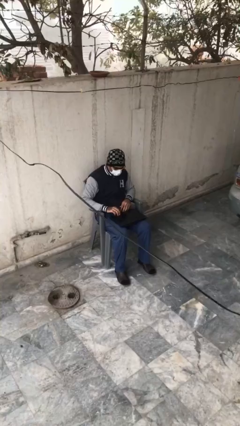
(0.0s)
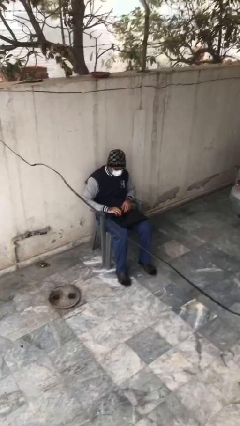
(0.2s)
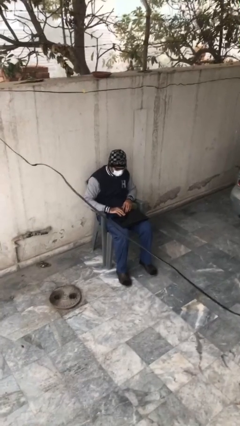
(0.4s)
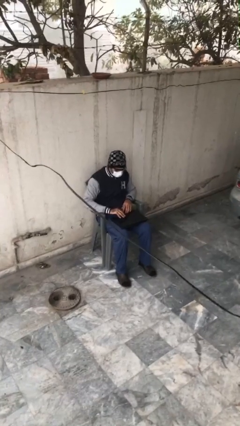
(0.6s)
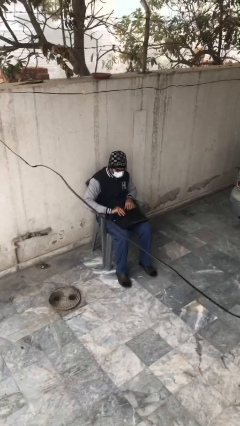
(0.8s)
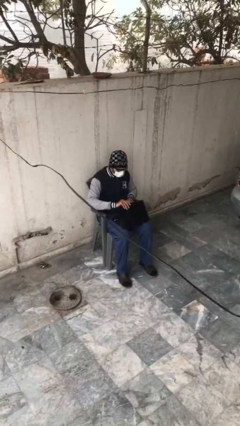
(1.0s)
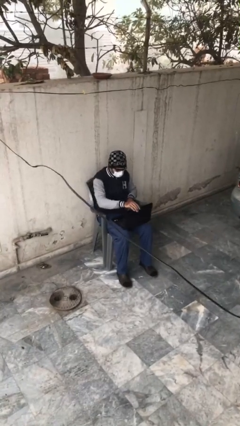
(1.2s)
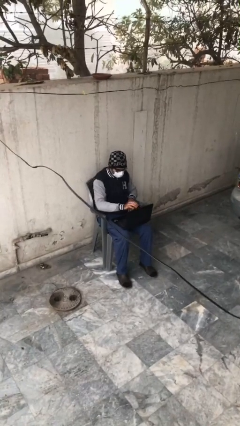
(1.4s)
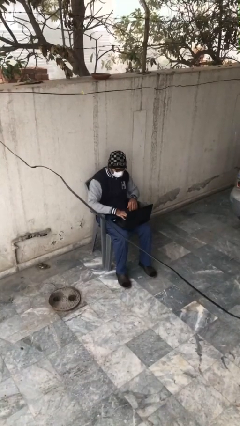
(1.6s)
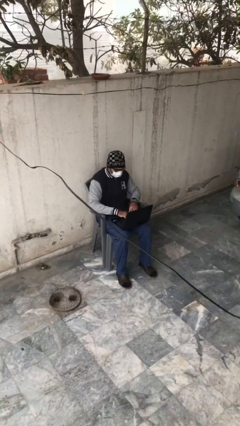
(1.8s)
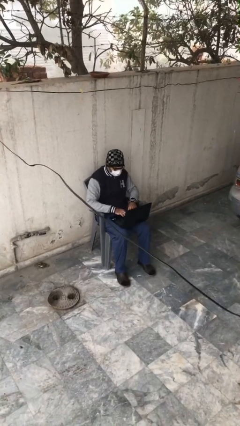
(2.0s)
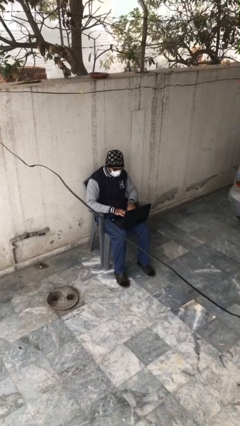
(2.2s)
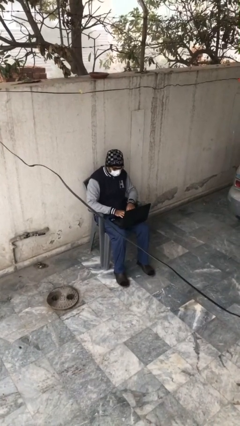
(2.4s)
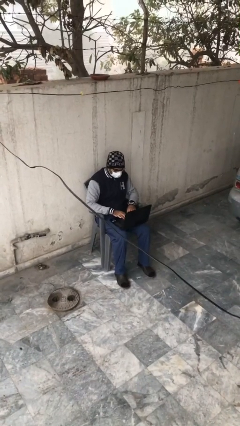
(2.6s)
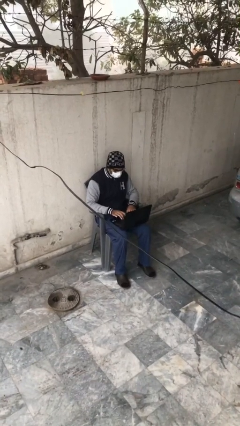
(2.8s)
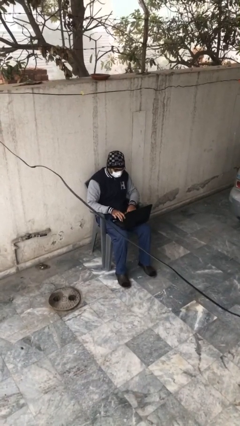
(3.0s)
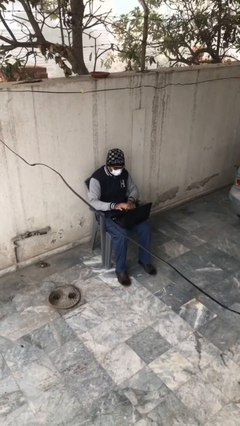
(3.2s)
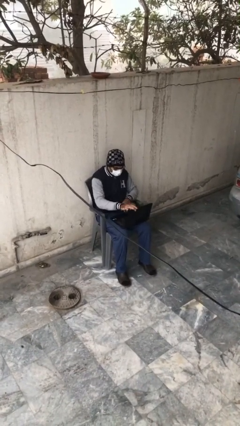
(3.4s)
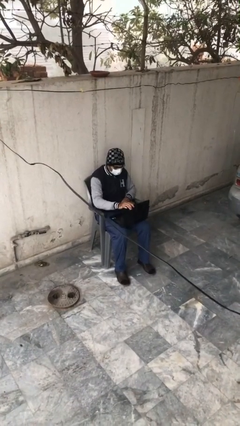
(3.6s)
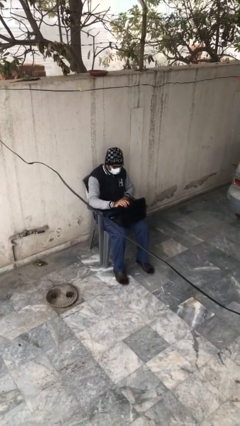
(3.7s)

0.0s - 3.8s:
person interacts with laptop

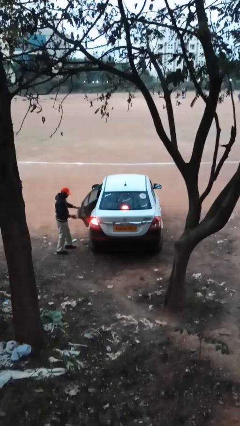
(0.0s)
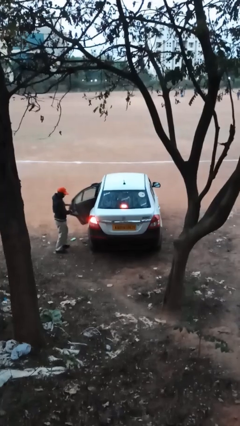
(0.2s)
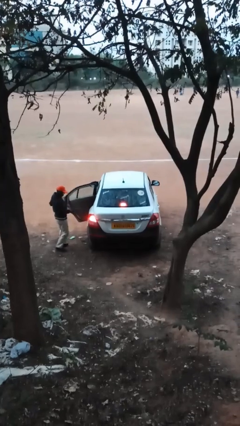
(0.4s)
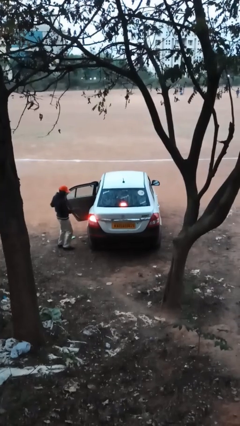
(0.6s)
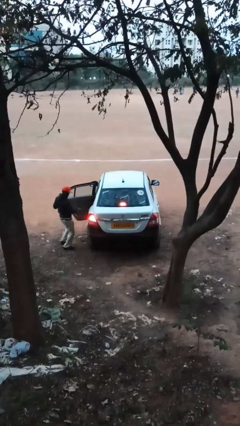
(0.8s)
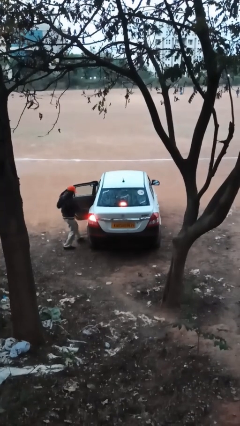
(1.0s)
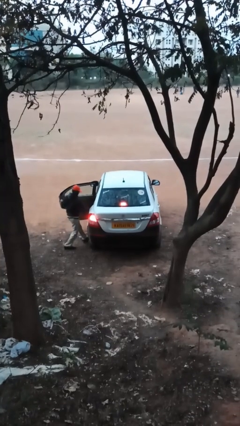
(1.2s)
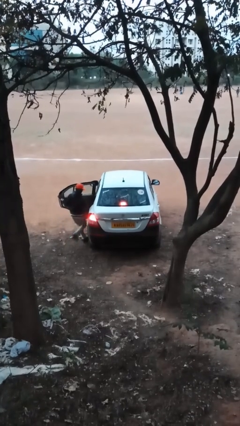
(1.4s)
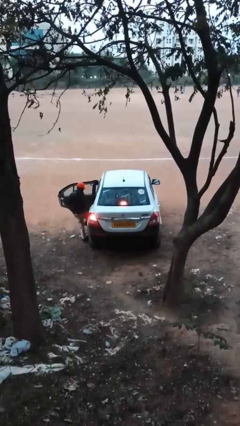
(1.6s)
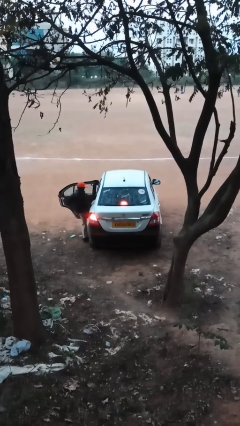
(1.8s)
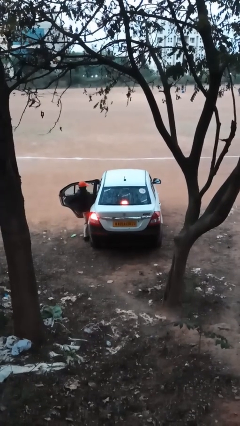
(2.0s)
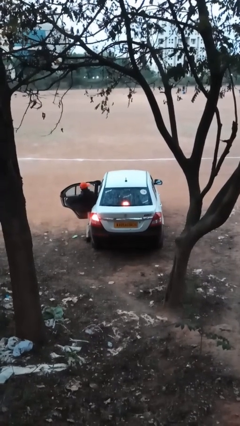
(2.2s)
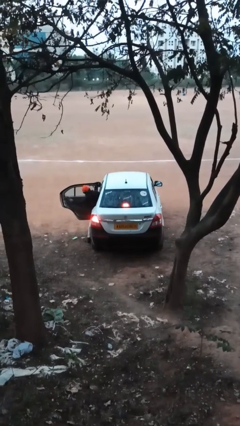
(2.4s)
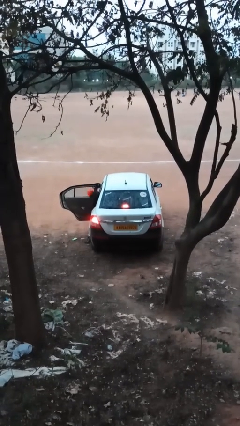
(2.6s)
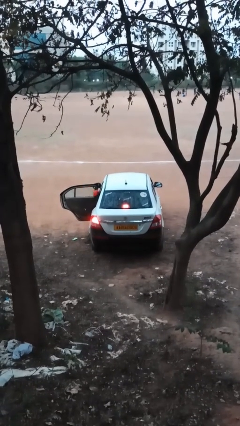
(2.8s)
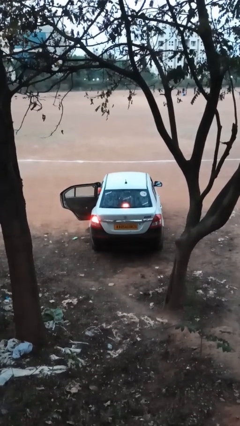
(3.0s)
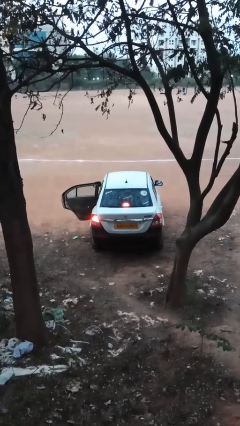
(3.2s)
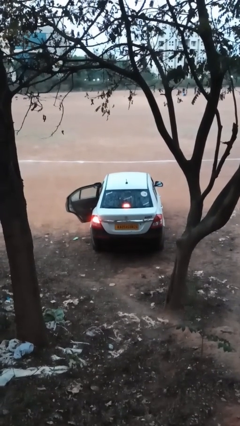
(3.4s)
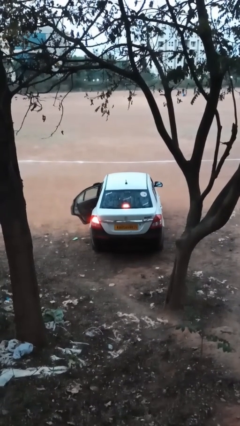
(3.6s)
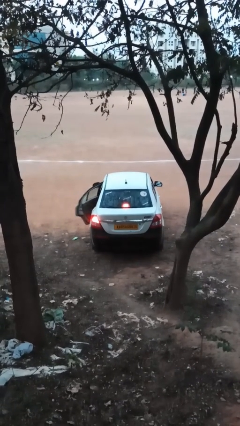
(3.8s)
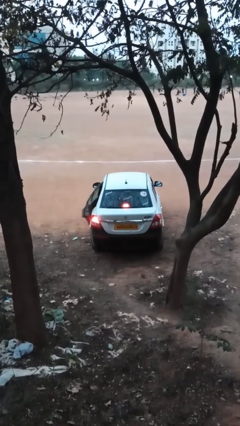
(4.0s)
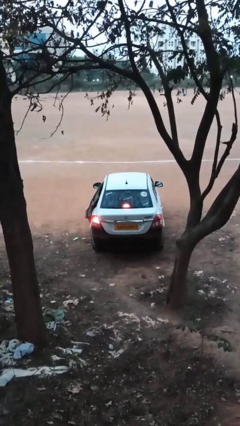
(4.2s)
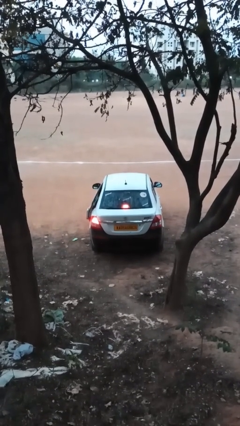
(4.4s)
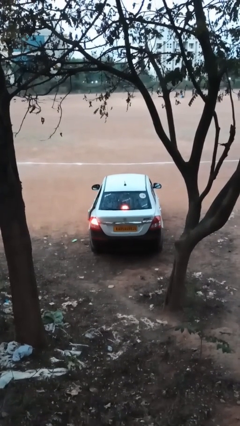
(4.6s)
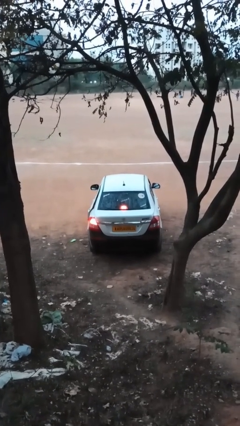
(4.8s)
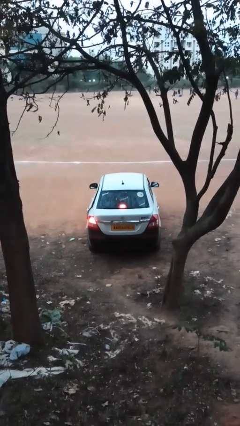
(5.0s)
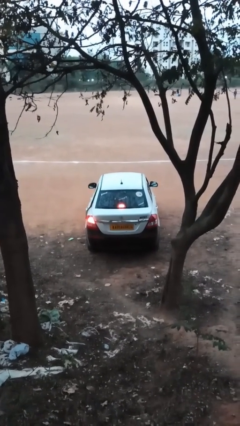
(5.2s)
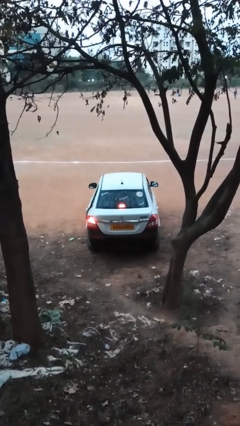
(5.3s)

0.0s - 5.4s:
car picks up person

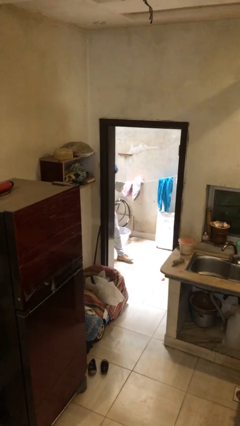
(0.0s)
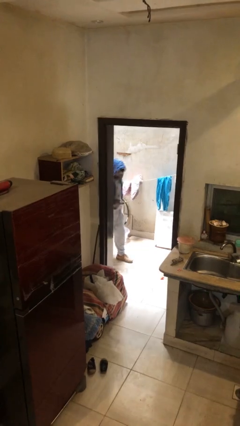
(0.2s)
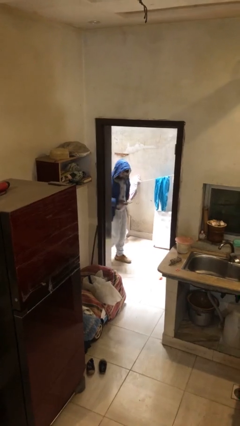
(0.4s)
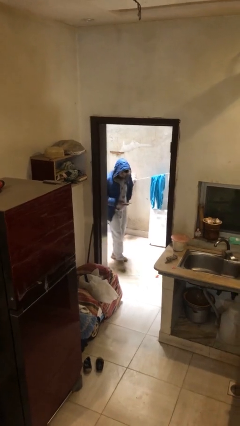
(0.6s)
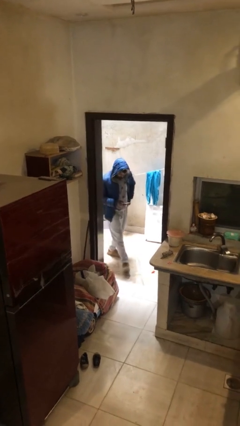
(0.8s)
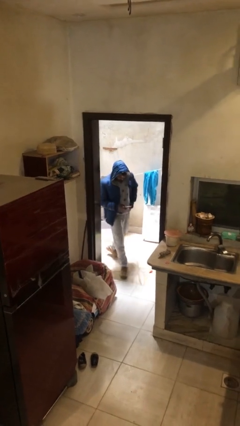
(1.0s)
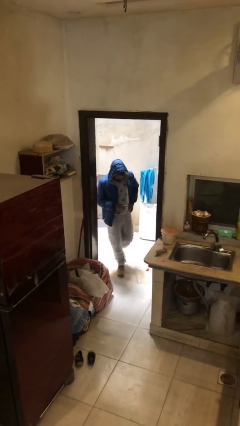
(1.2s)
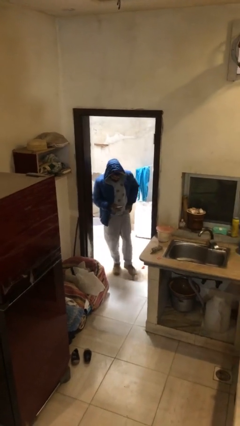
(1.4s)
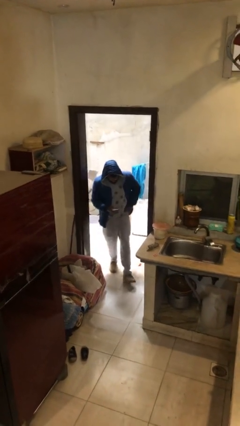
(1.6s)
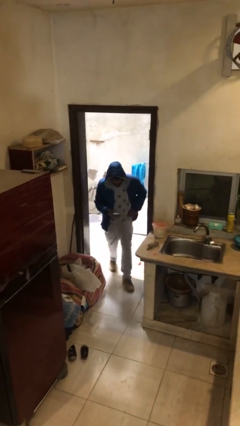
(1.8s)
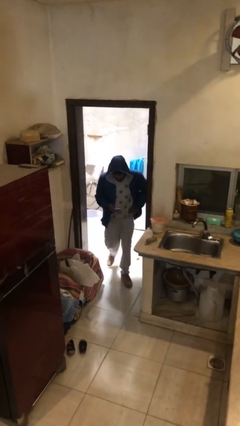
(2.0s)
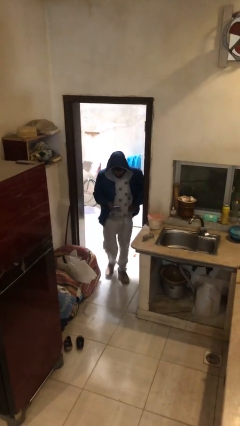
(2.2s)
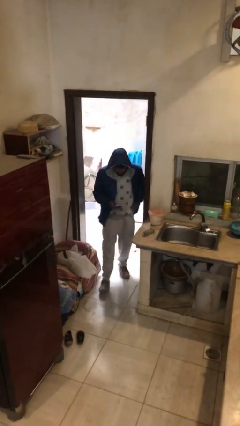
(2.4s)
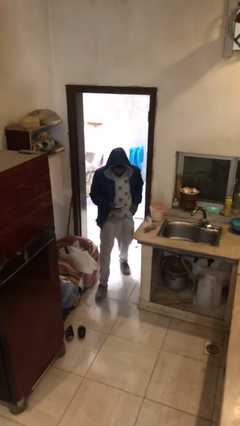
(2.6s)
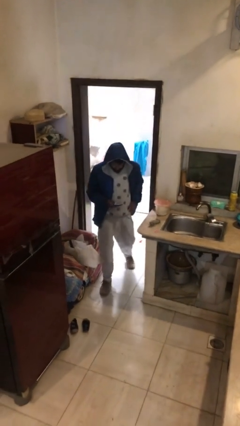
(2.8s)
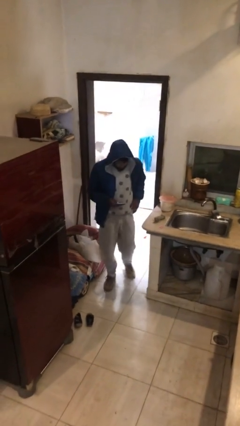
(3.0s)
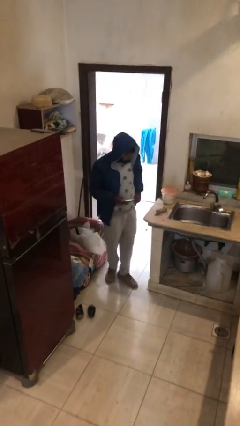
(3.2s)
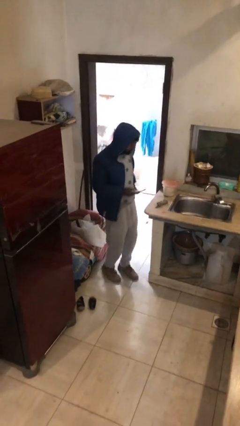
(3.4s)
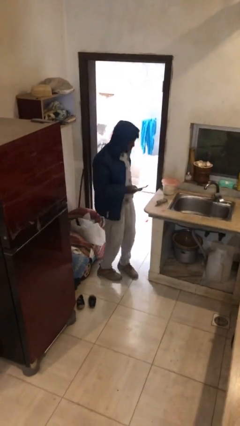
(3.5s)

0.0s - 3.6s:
person enters scene through structure

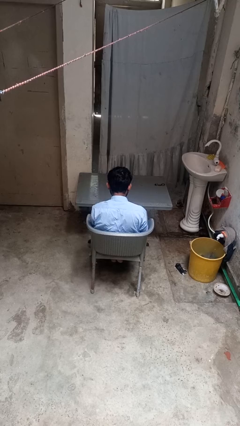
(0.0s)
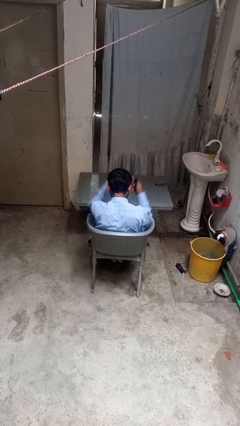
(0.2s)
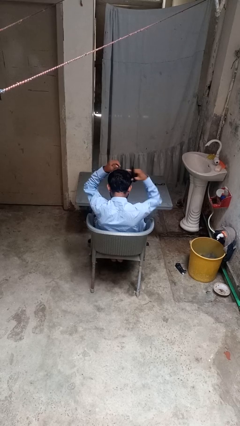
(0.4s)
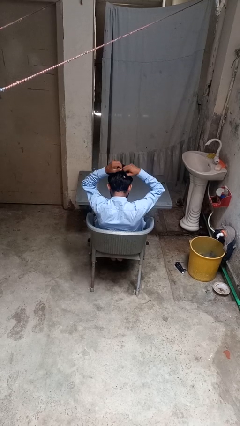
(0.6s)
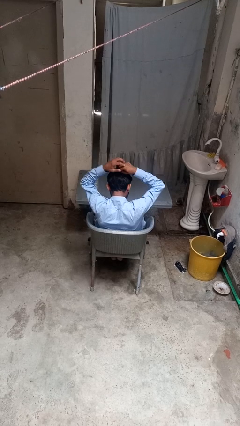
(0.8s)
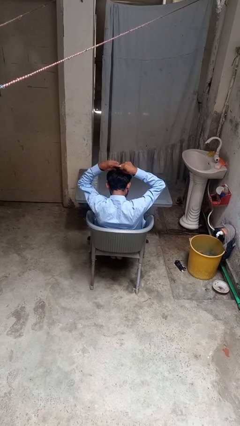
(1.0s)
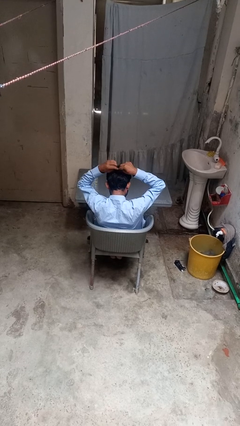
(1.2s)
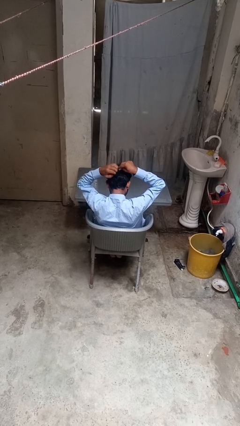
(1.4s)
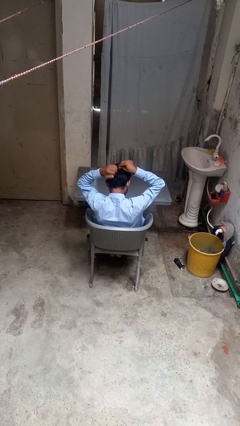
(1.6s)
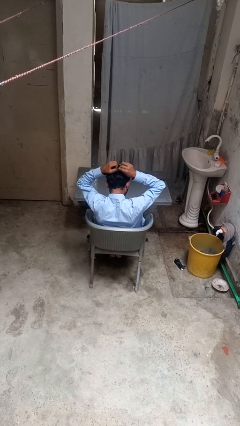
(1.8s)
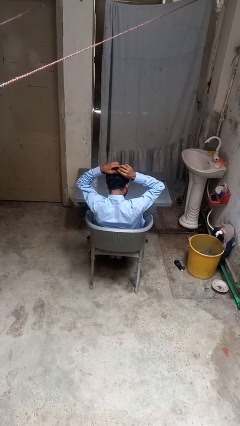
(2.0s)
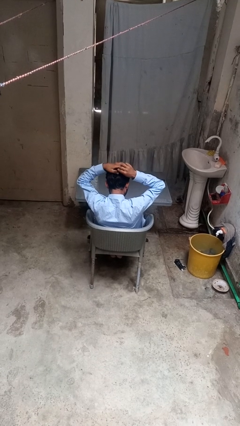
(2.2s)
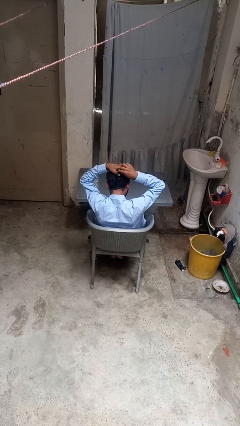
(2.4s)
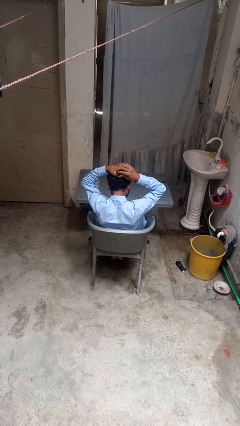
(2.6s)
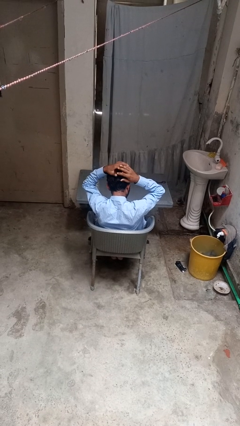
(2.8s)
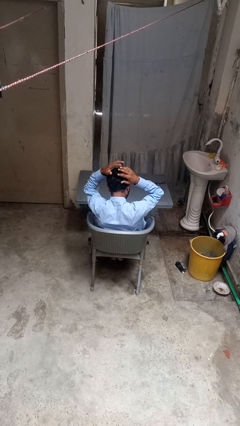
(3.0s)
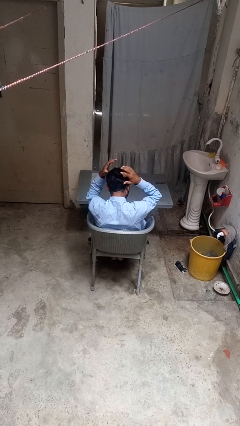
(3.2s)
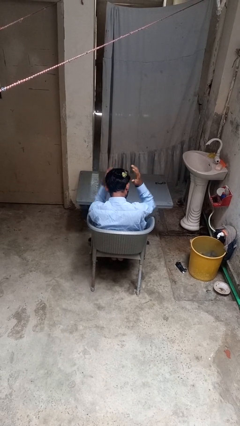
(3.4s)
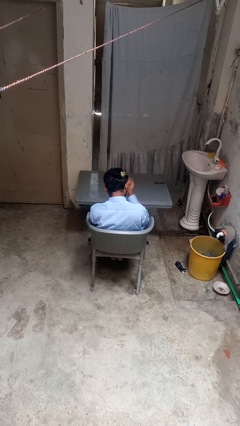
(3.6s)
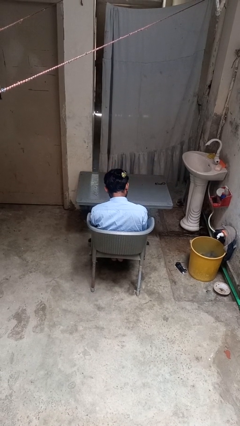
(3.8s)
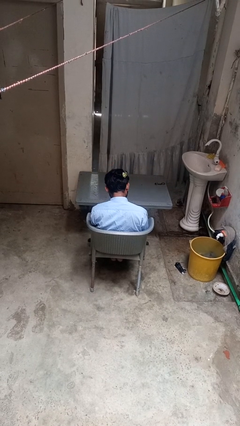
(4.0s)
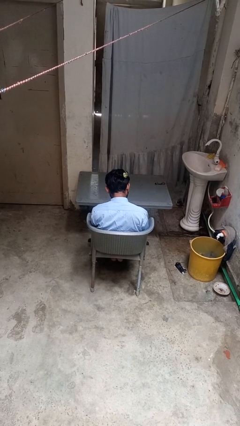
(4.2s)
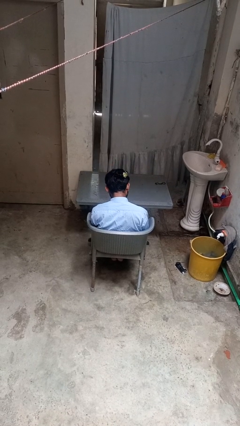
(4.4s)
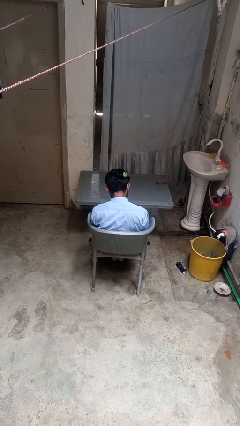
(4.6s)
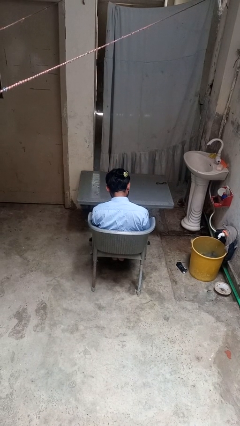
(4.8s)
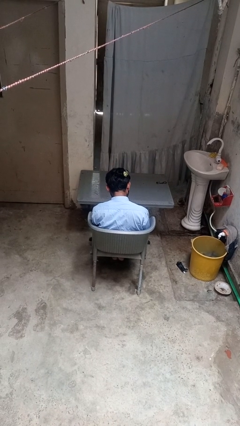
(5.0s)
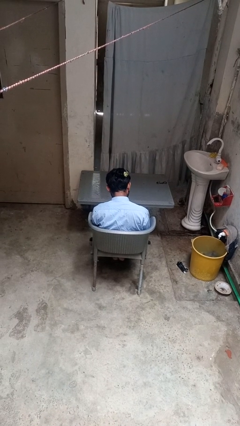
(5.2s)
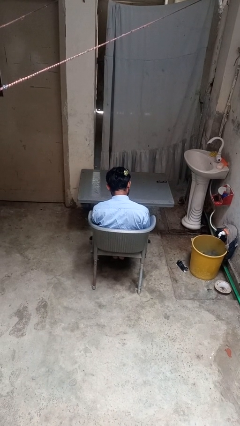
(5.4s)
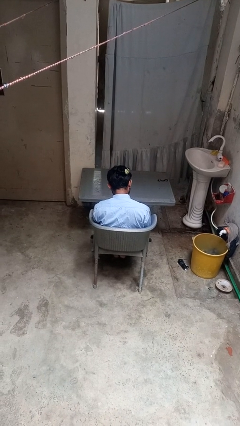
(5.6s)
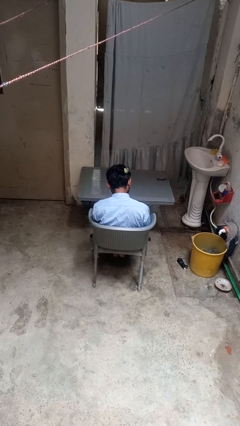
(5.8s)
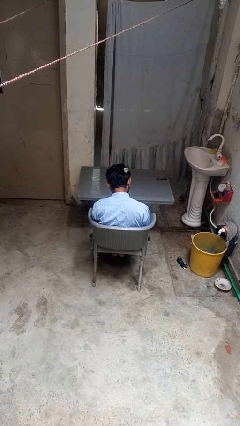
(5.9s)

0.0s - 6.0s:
person puts hair in ponytail
